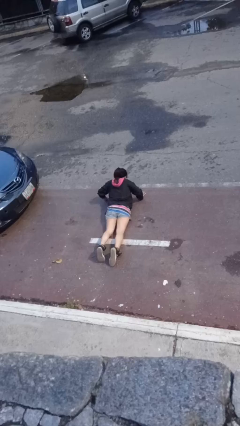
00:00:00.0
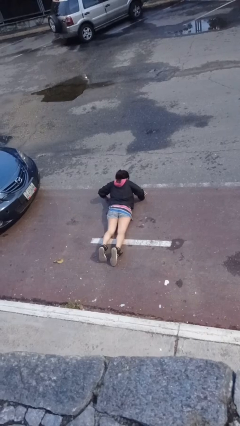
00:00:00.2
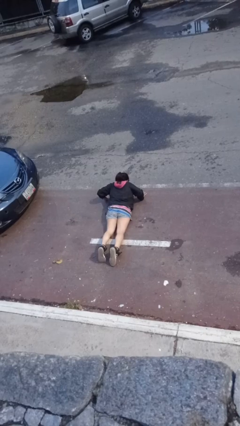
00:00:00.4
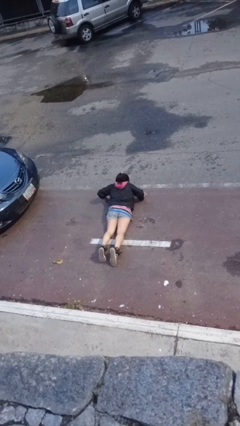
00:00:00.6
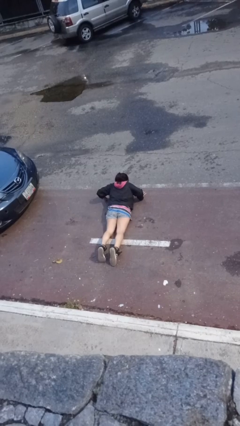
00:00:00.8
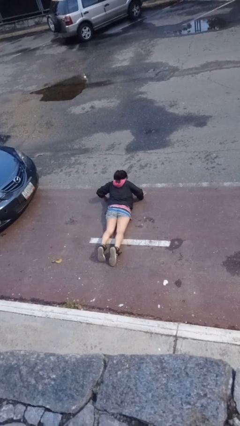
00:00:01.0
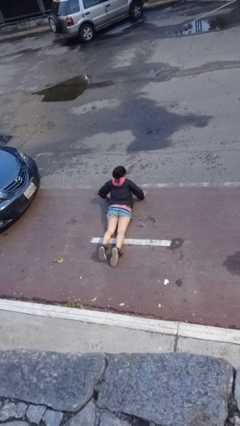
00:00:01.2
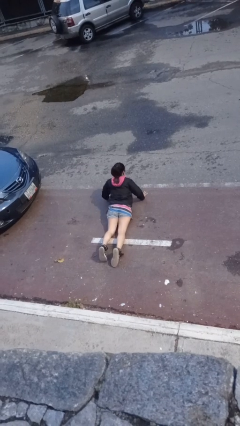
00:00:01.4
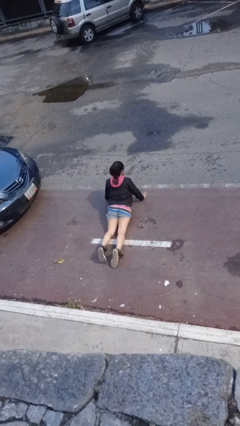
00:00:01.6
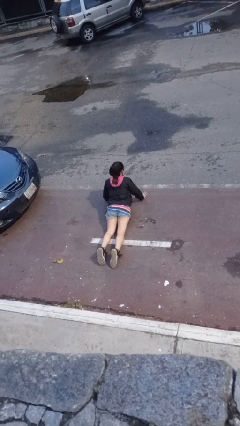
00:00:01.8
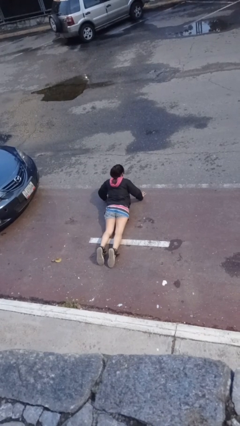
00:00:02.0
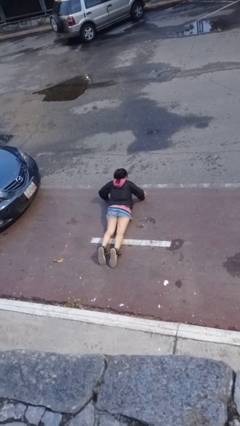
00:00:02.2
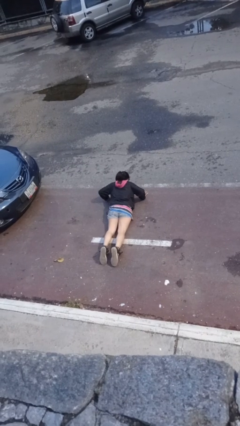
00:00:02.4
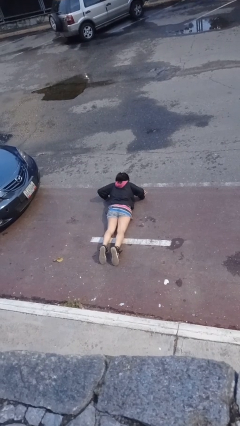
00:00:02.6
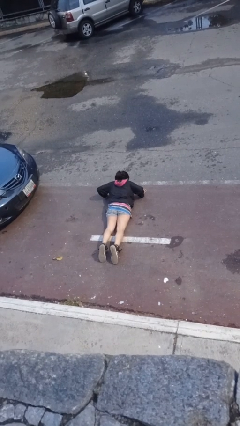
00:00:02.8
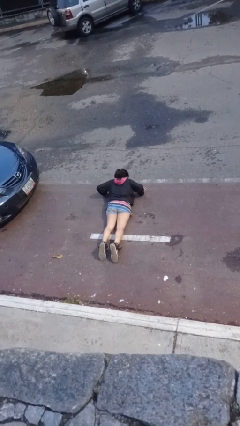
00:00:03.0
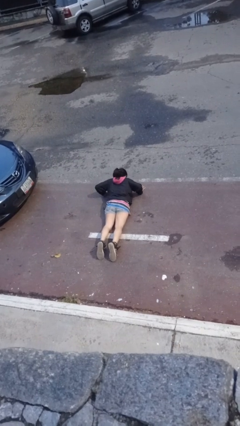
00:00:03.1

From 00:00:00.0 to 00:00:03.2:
person exercises with pushup

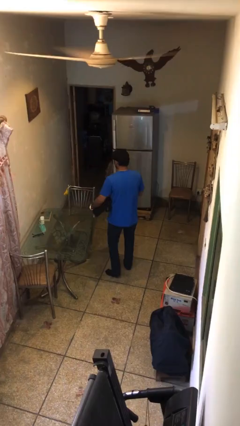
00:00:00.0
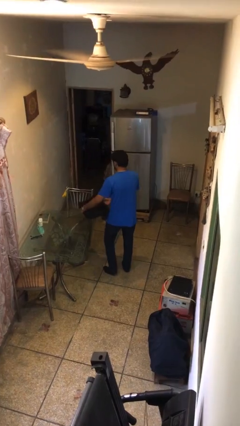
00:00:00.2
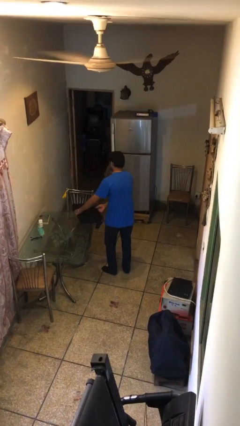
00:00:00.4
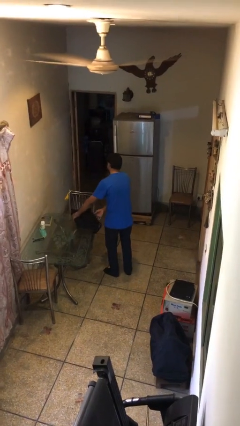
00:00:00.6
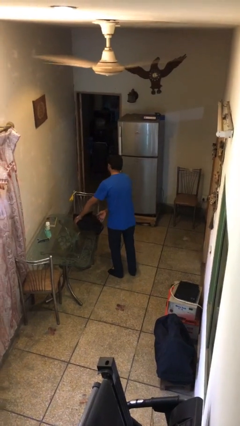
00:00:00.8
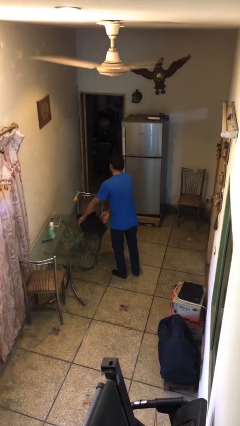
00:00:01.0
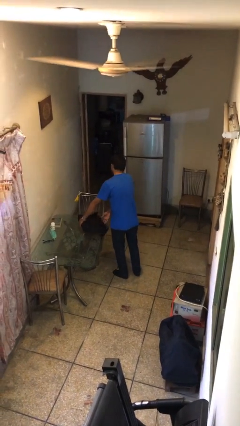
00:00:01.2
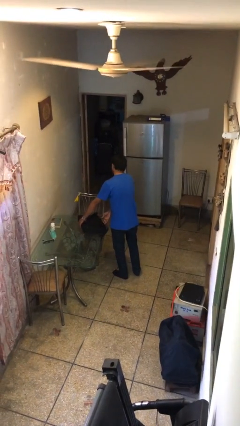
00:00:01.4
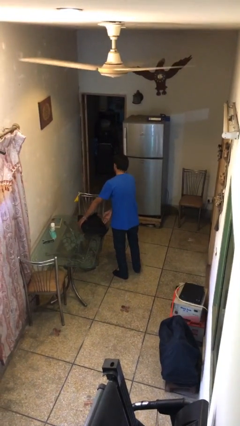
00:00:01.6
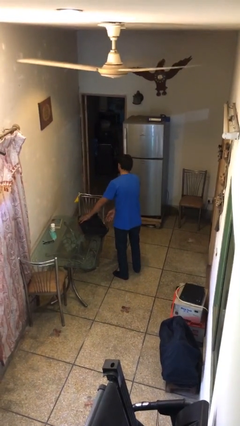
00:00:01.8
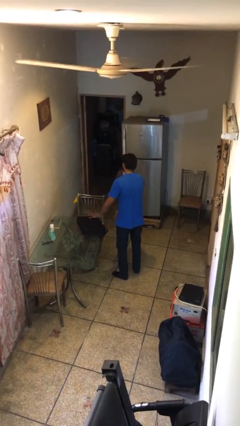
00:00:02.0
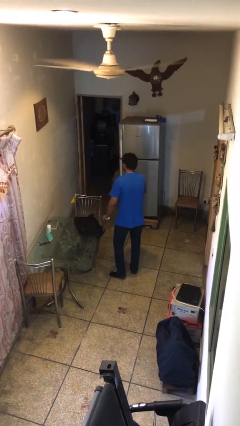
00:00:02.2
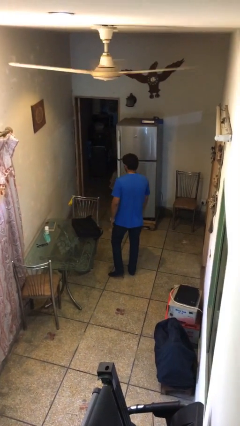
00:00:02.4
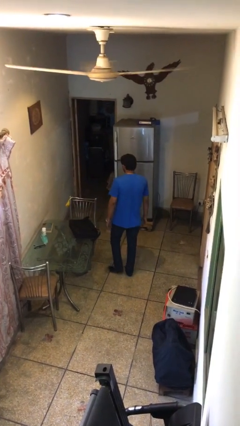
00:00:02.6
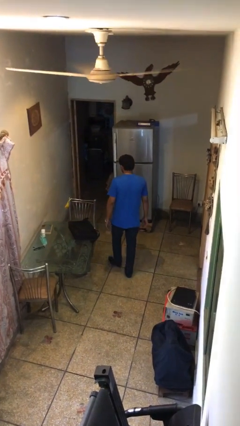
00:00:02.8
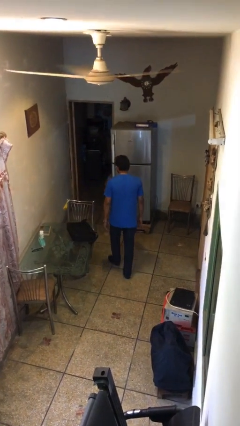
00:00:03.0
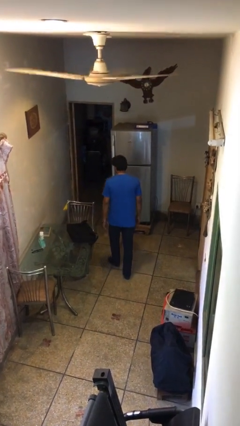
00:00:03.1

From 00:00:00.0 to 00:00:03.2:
person puts down object on table

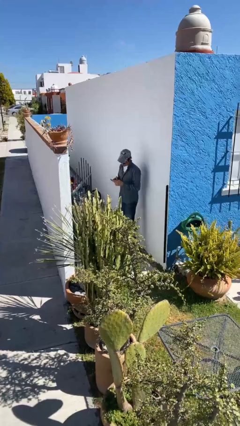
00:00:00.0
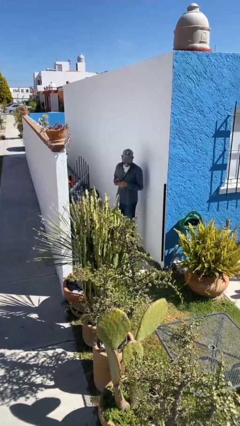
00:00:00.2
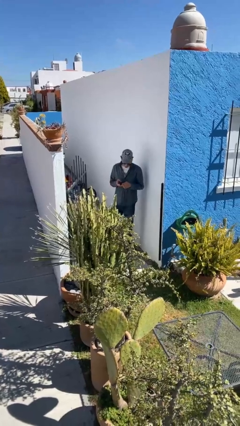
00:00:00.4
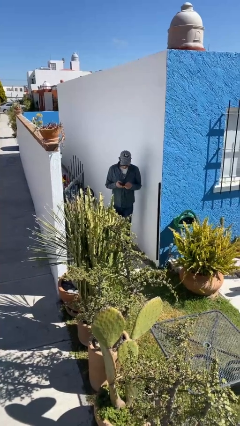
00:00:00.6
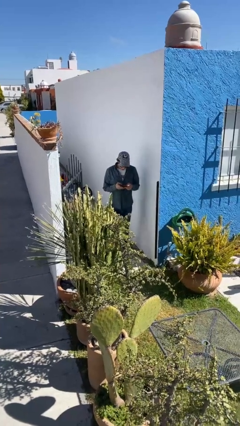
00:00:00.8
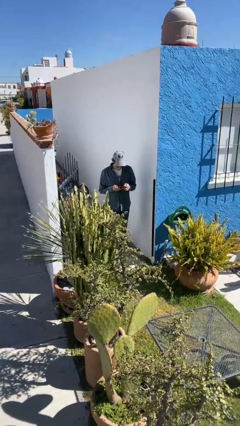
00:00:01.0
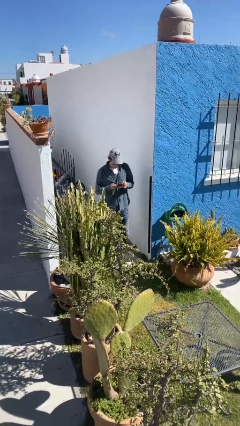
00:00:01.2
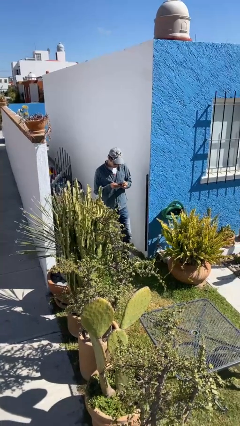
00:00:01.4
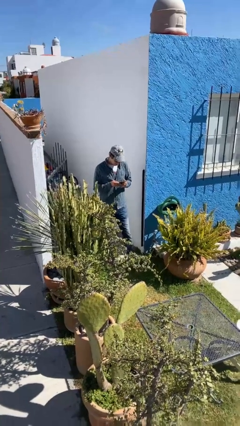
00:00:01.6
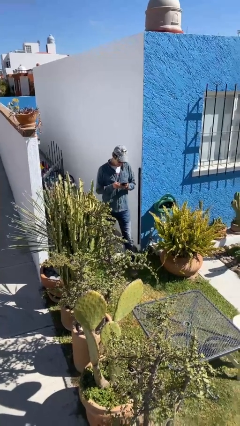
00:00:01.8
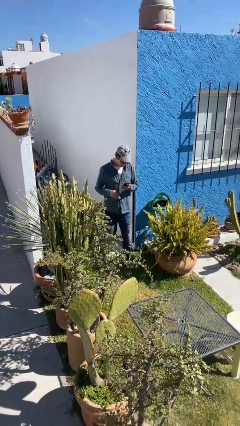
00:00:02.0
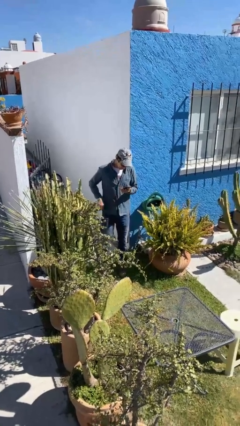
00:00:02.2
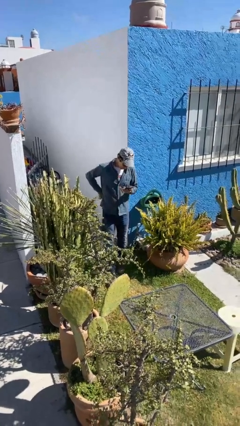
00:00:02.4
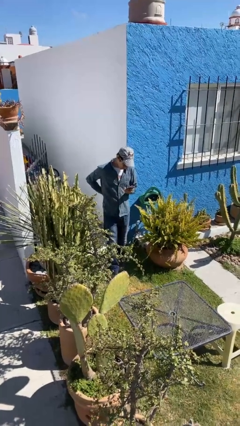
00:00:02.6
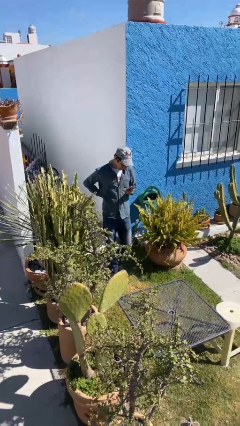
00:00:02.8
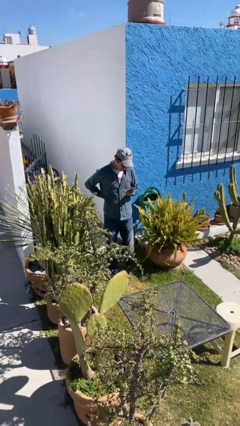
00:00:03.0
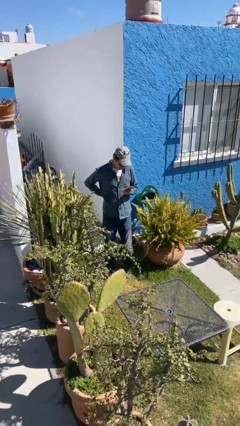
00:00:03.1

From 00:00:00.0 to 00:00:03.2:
person enters scene through structure

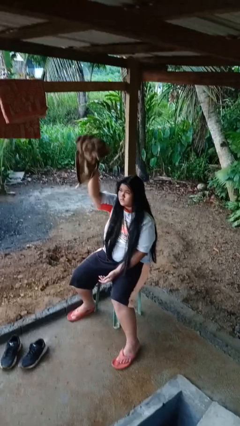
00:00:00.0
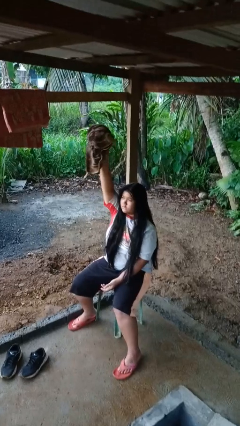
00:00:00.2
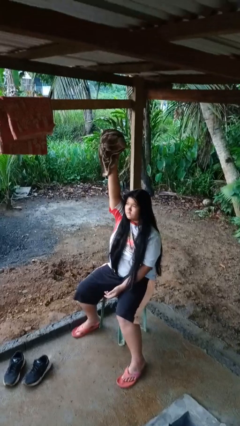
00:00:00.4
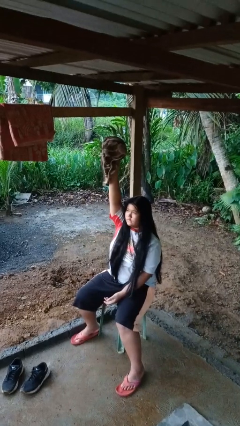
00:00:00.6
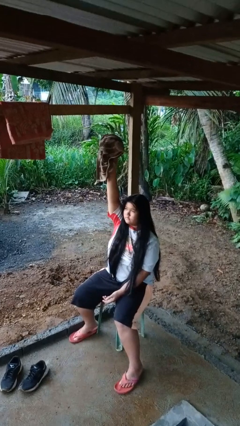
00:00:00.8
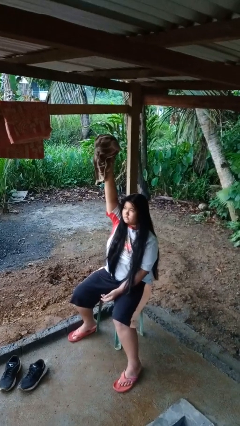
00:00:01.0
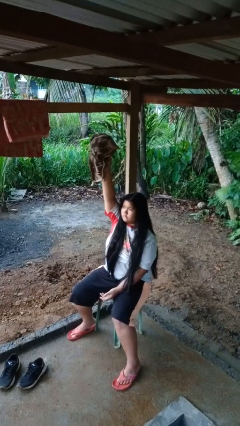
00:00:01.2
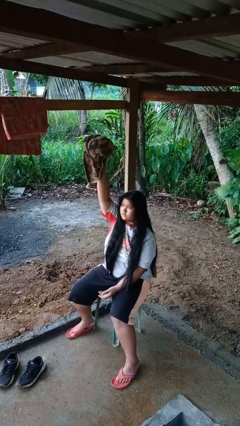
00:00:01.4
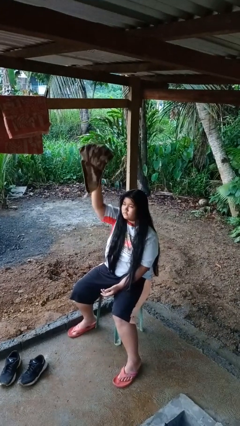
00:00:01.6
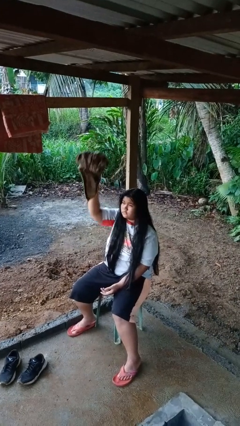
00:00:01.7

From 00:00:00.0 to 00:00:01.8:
person holds object above head

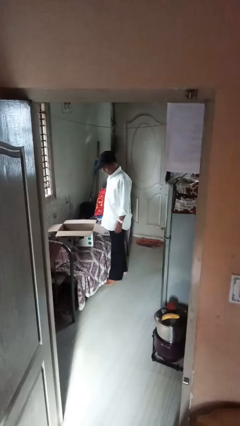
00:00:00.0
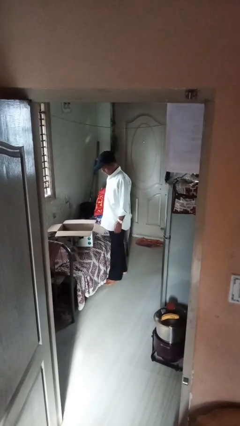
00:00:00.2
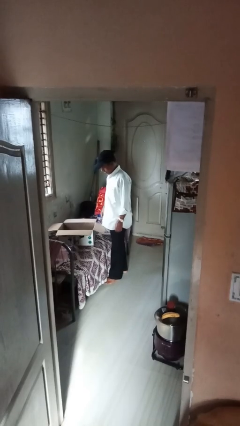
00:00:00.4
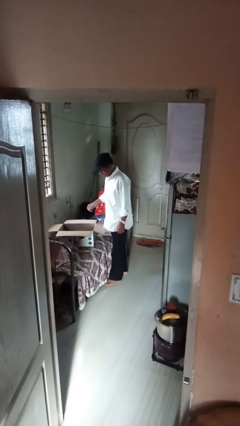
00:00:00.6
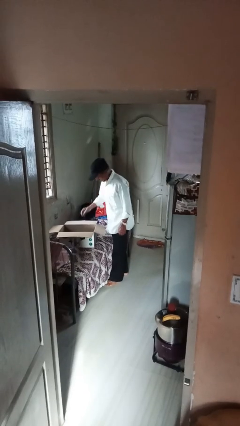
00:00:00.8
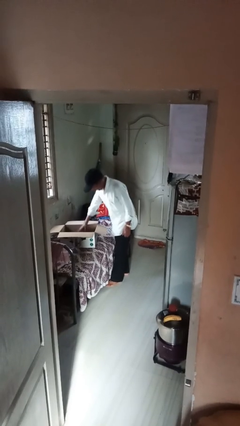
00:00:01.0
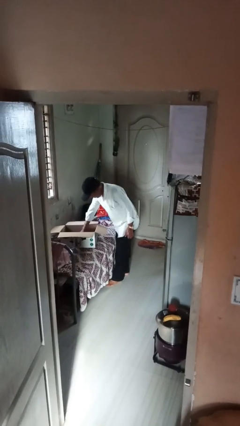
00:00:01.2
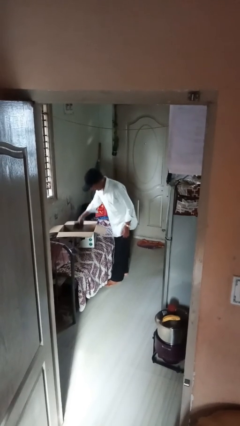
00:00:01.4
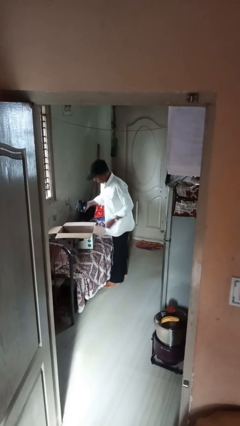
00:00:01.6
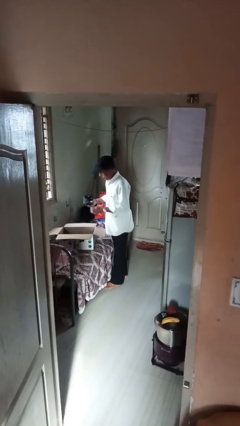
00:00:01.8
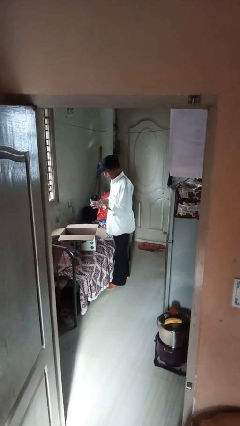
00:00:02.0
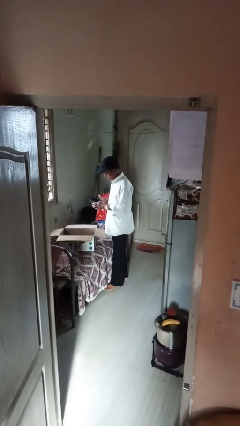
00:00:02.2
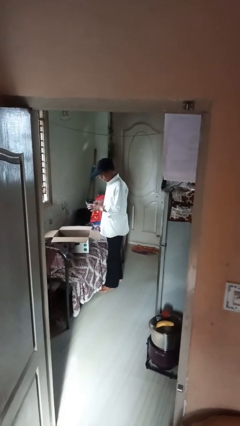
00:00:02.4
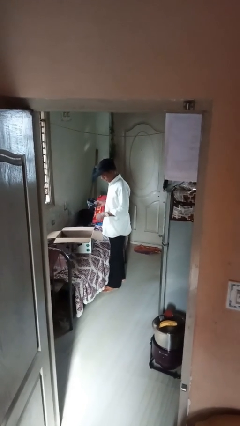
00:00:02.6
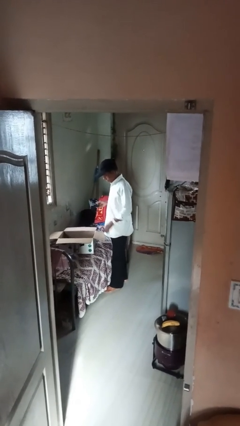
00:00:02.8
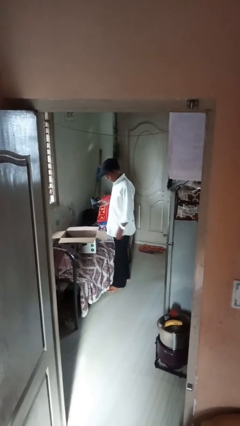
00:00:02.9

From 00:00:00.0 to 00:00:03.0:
person takes object from box

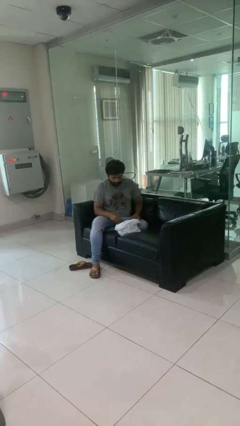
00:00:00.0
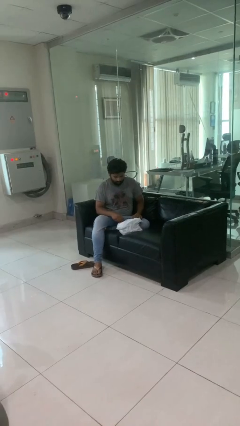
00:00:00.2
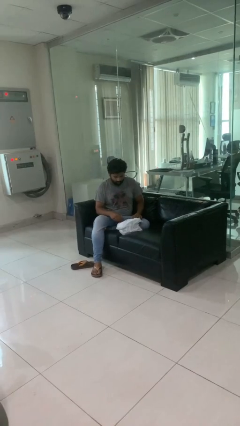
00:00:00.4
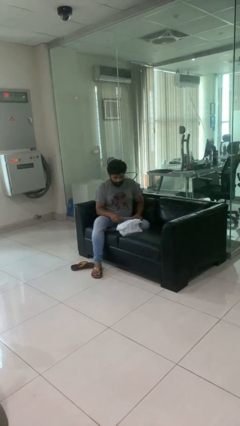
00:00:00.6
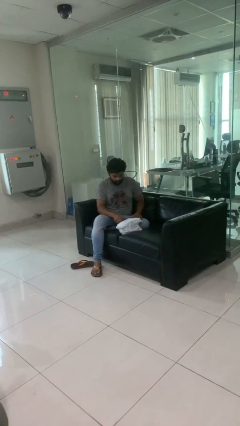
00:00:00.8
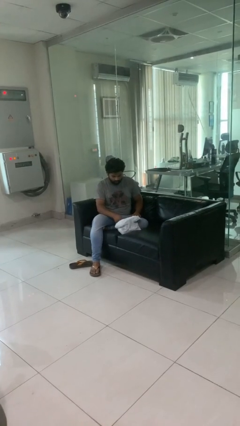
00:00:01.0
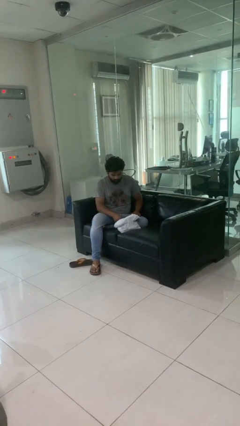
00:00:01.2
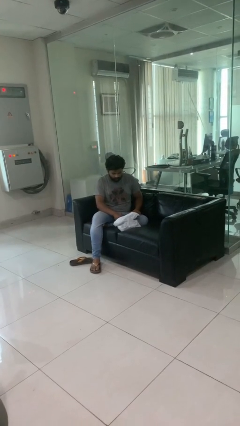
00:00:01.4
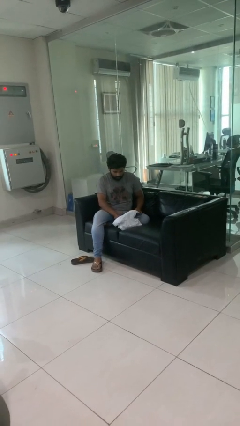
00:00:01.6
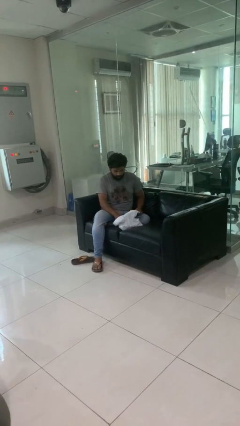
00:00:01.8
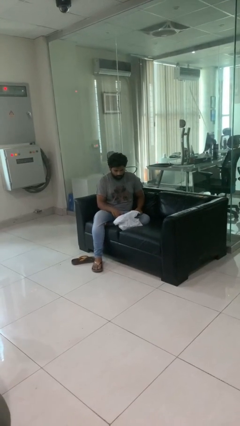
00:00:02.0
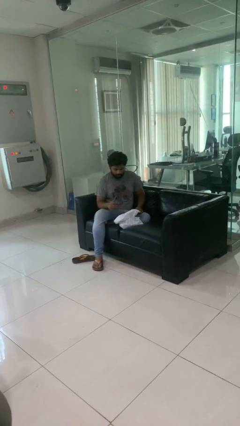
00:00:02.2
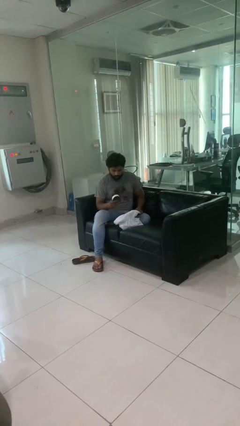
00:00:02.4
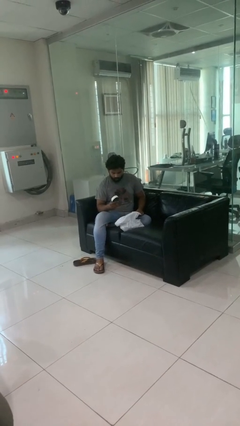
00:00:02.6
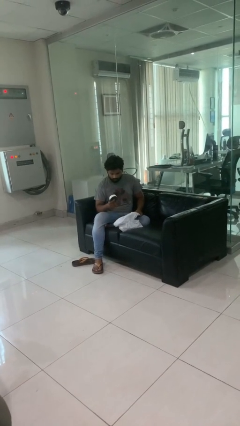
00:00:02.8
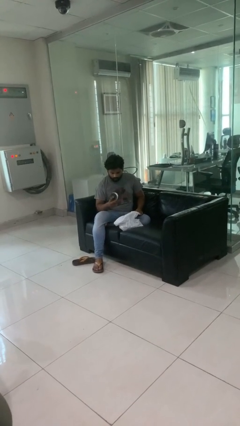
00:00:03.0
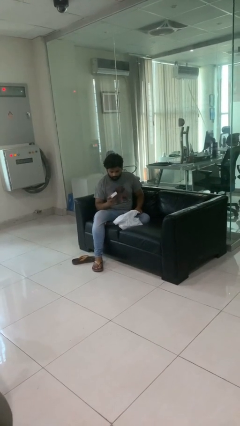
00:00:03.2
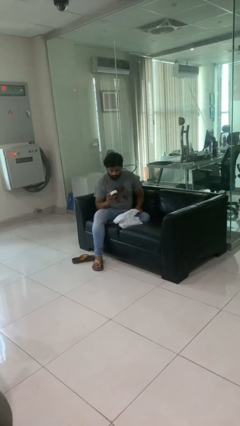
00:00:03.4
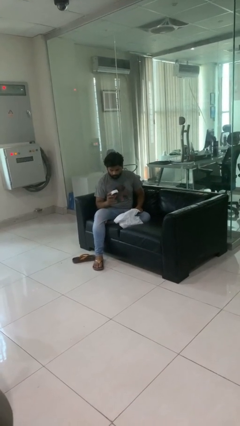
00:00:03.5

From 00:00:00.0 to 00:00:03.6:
person takes object from bag
